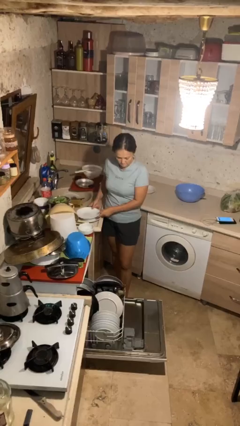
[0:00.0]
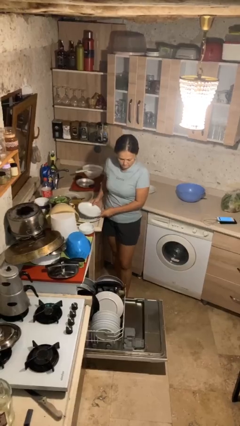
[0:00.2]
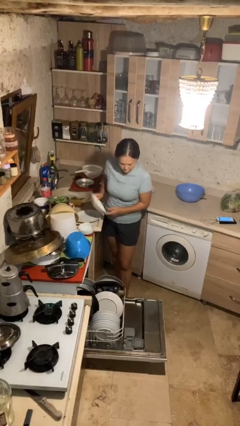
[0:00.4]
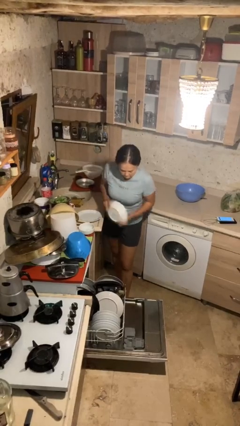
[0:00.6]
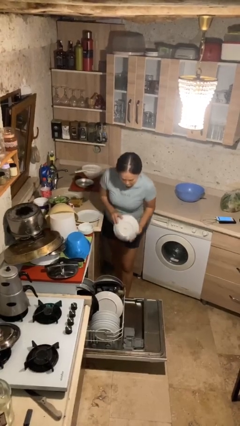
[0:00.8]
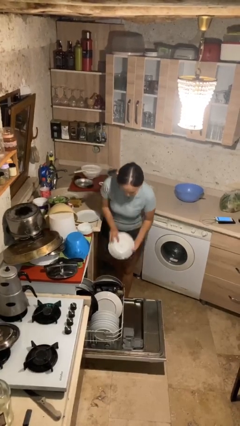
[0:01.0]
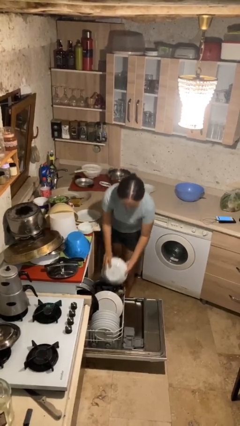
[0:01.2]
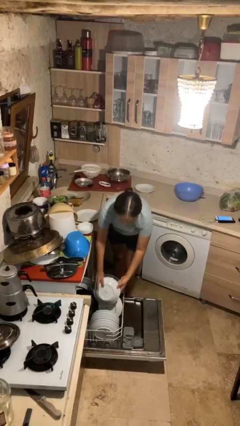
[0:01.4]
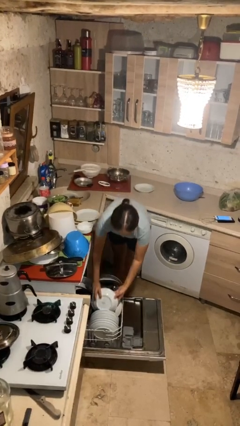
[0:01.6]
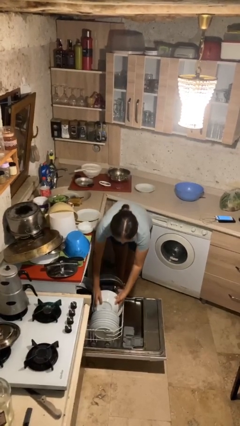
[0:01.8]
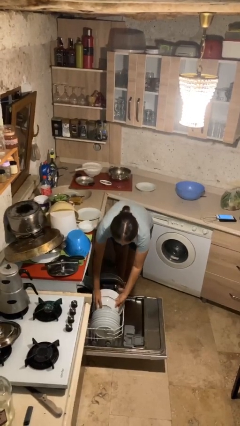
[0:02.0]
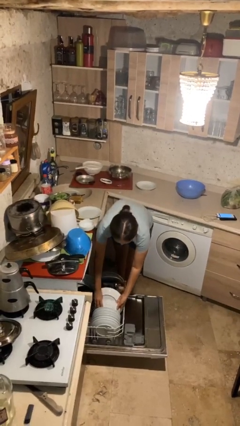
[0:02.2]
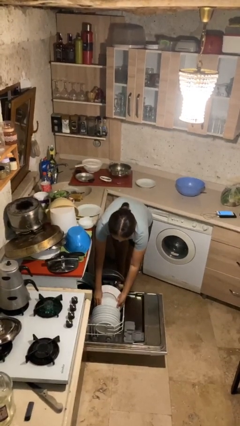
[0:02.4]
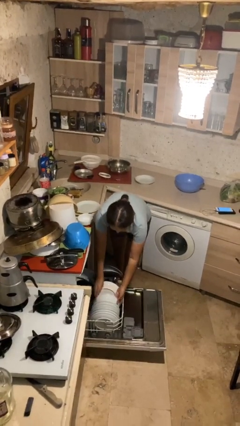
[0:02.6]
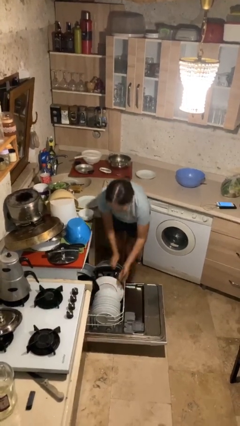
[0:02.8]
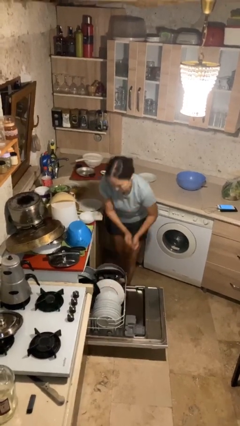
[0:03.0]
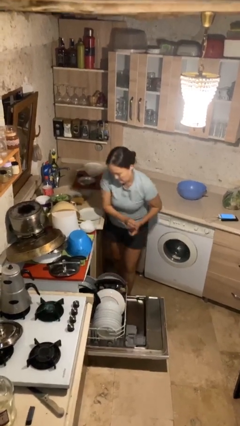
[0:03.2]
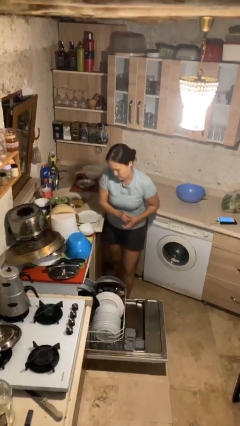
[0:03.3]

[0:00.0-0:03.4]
person loads dishwasher

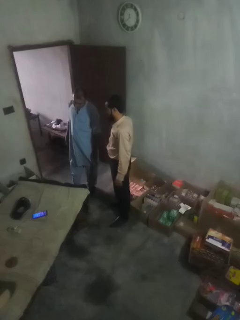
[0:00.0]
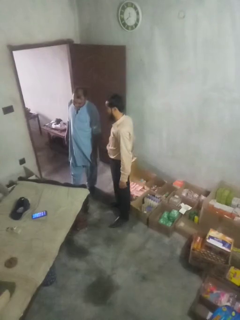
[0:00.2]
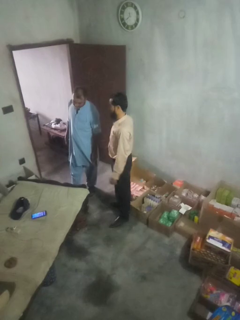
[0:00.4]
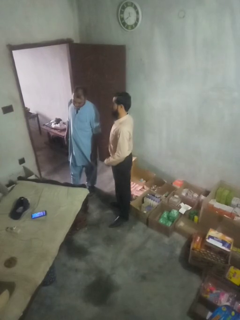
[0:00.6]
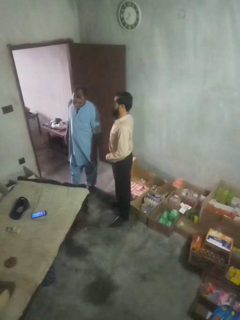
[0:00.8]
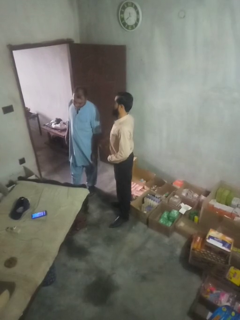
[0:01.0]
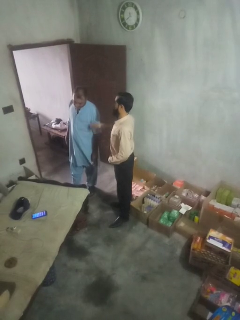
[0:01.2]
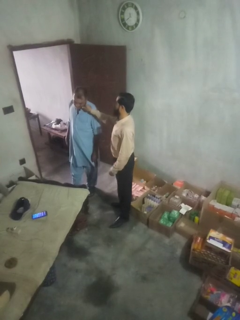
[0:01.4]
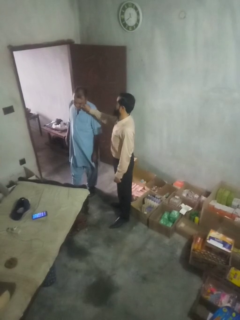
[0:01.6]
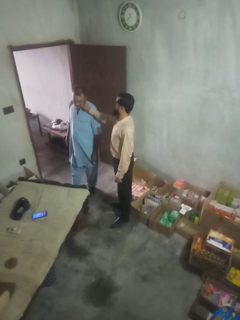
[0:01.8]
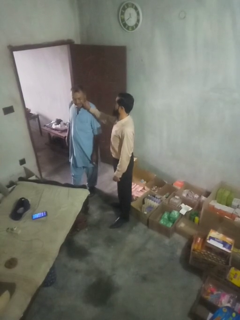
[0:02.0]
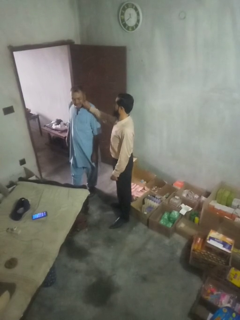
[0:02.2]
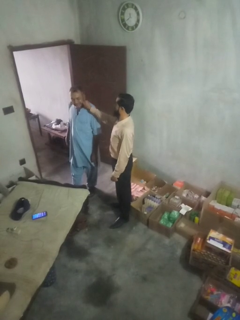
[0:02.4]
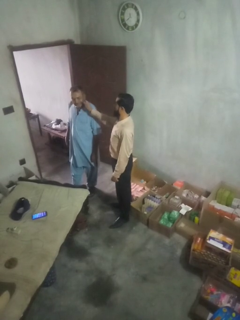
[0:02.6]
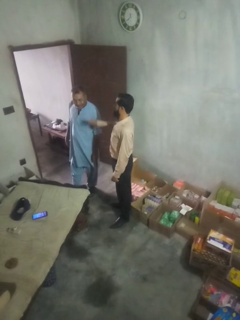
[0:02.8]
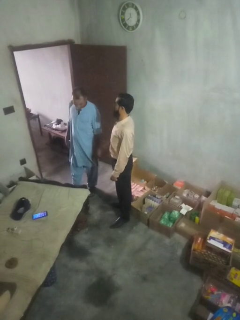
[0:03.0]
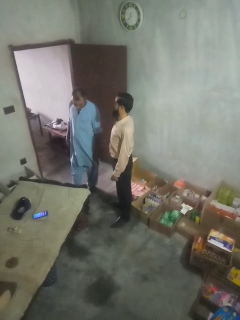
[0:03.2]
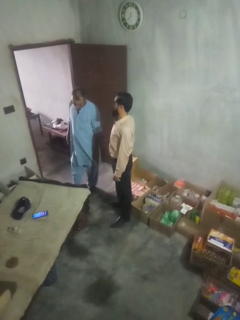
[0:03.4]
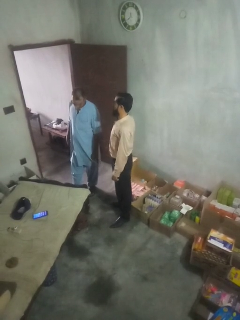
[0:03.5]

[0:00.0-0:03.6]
person touches face of person

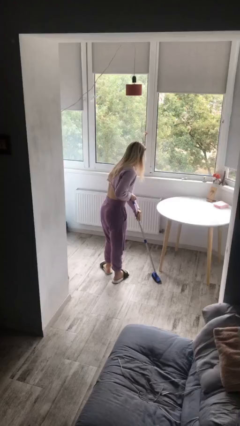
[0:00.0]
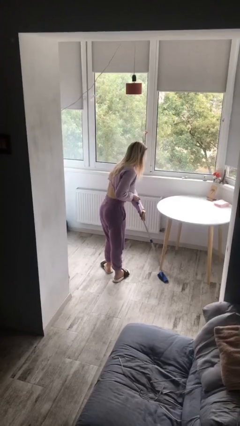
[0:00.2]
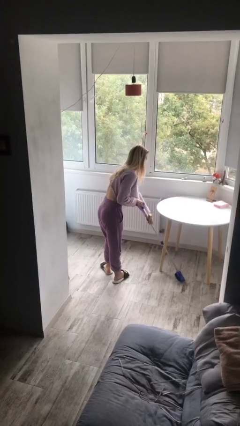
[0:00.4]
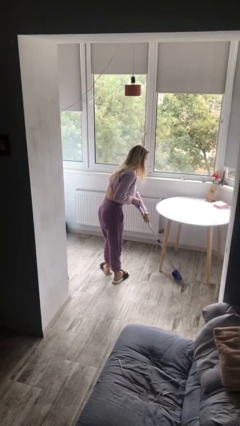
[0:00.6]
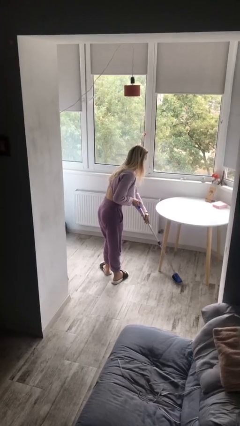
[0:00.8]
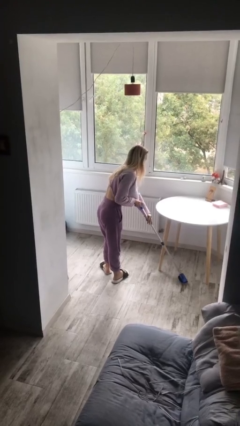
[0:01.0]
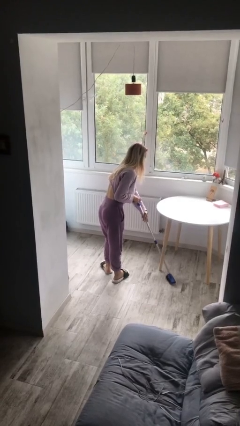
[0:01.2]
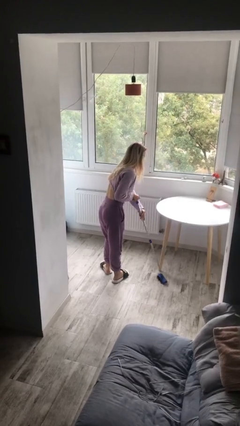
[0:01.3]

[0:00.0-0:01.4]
person mops

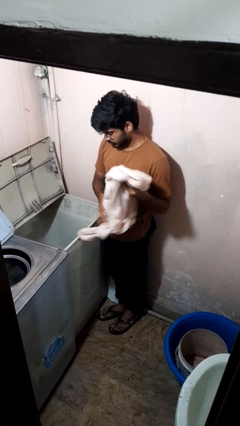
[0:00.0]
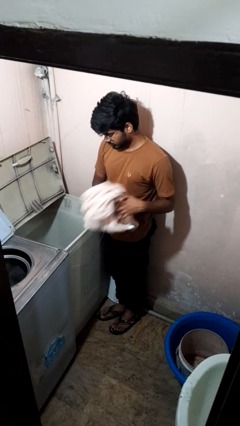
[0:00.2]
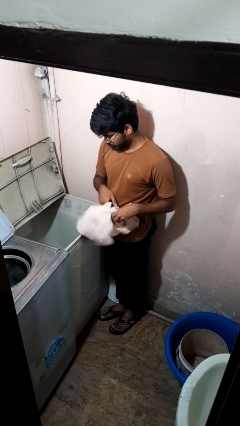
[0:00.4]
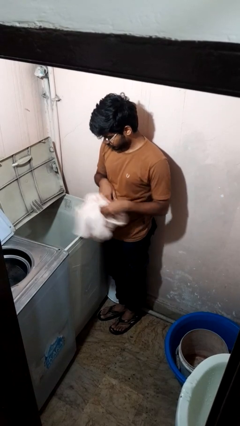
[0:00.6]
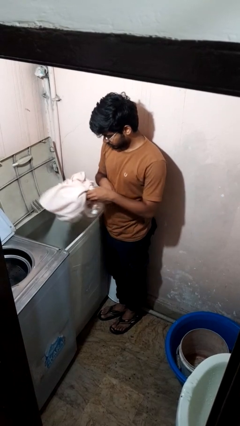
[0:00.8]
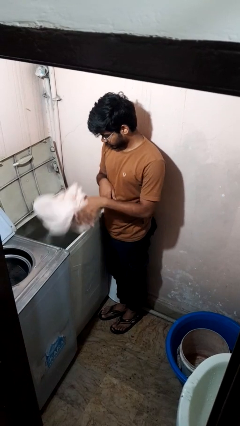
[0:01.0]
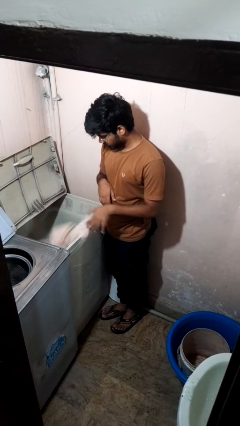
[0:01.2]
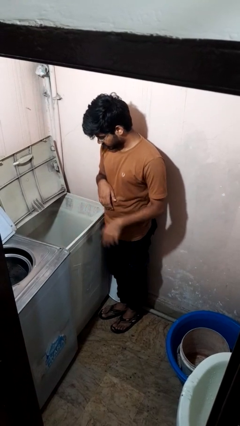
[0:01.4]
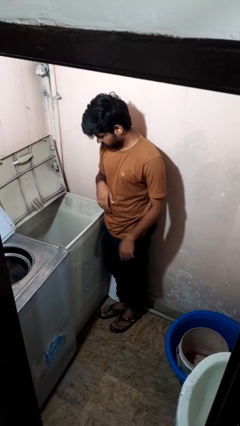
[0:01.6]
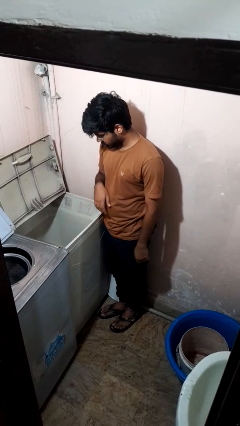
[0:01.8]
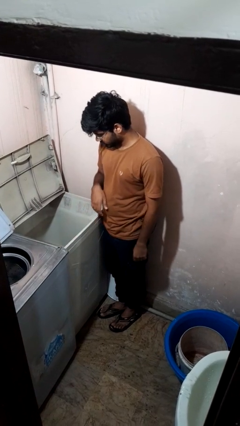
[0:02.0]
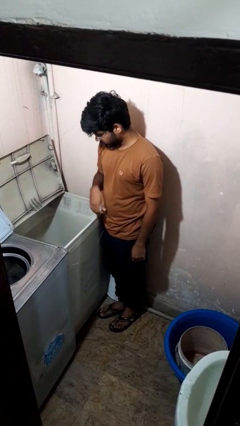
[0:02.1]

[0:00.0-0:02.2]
person loads clotheswasher

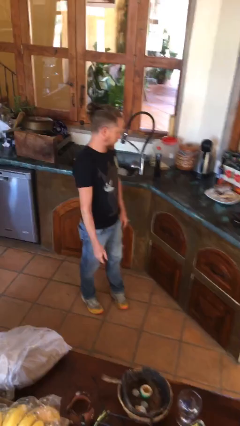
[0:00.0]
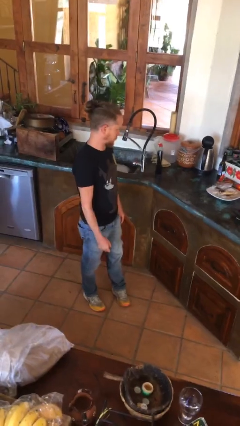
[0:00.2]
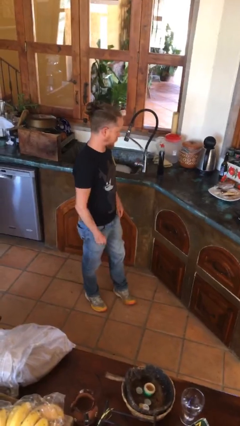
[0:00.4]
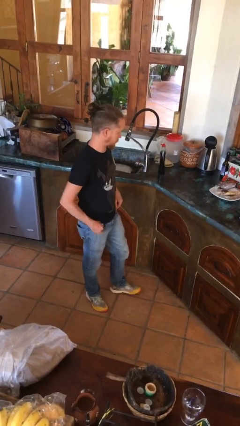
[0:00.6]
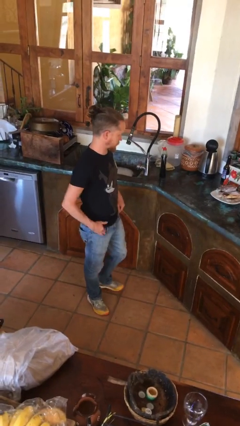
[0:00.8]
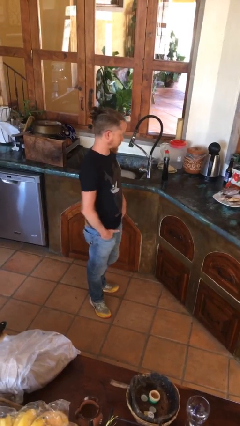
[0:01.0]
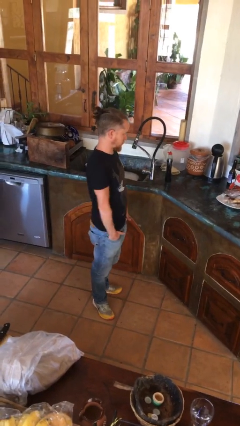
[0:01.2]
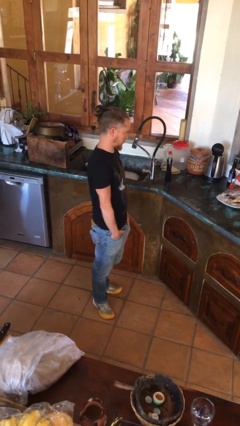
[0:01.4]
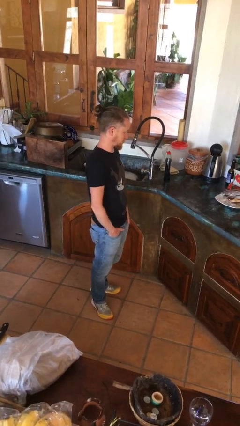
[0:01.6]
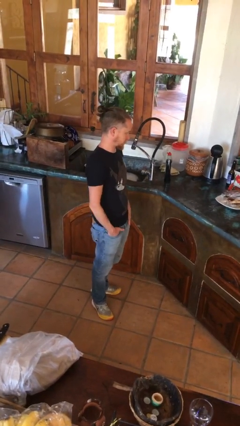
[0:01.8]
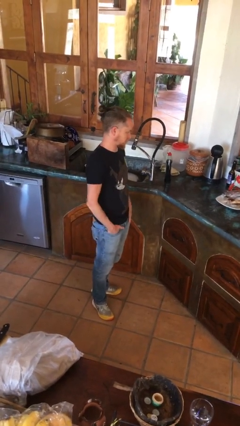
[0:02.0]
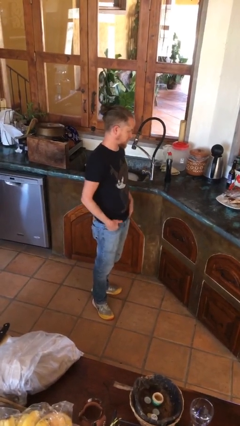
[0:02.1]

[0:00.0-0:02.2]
person puts hands in back pockets

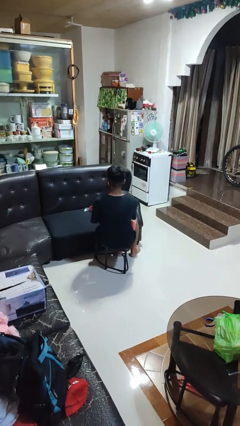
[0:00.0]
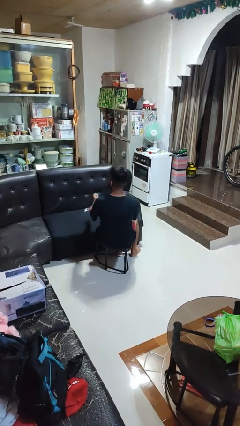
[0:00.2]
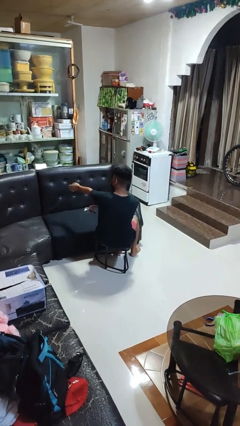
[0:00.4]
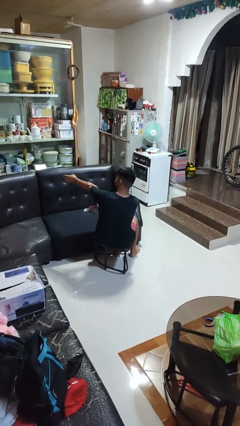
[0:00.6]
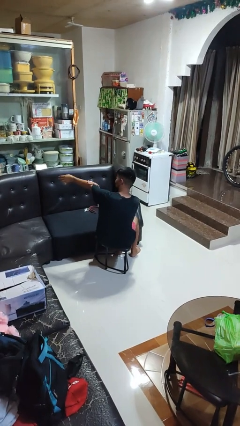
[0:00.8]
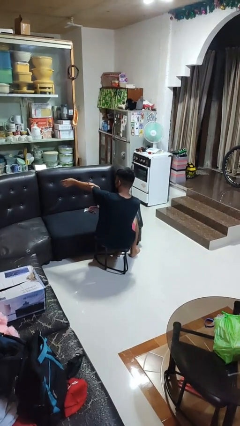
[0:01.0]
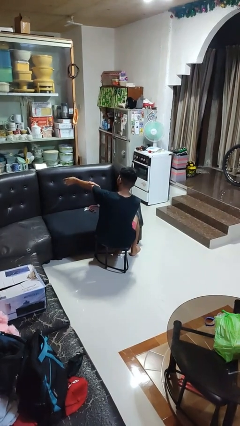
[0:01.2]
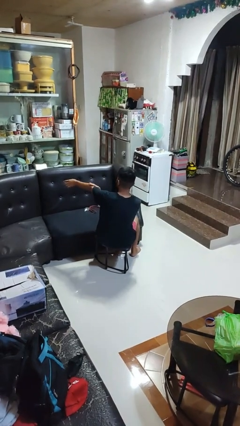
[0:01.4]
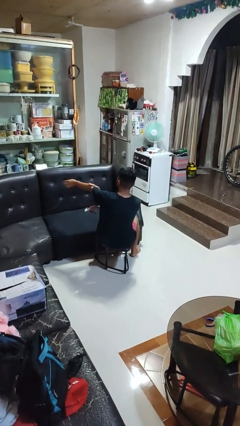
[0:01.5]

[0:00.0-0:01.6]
person swats bug

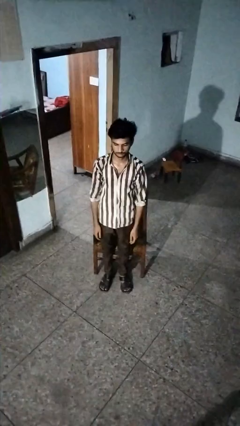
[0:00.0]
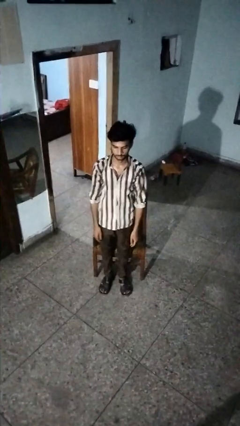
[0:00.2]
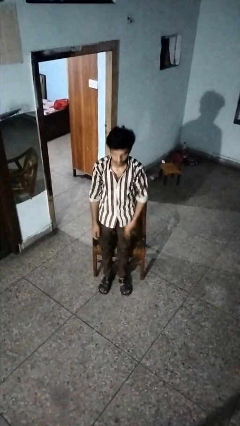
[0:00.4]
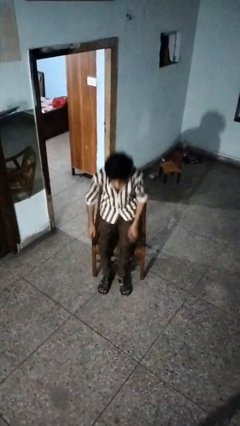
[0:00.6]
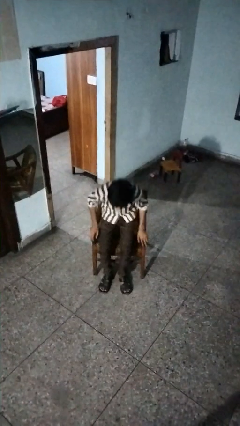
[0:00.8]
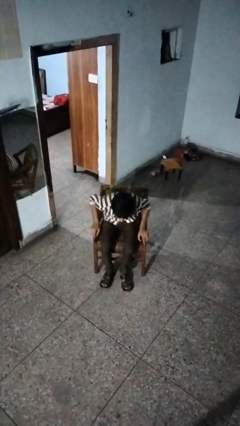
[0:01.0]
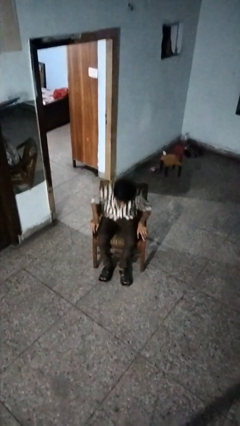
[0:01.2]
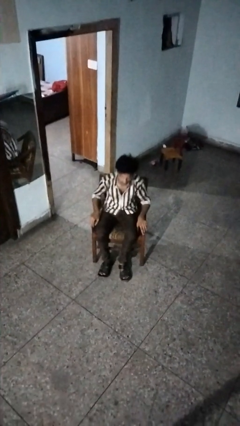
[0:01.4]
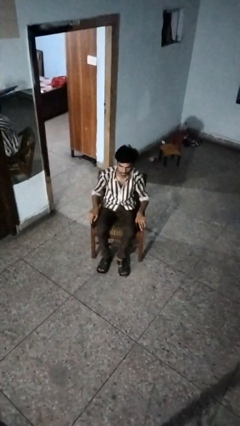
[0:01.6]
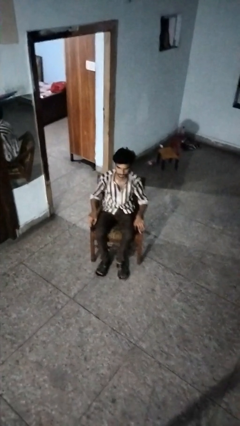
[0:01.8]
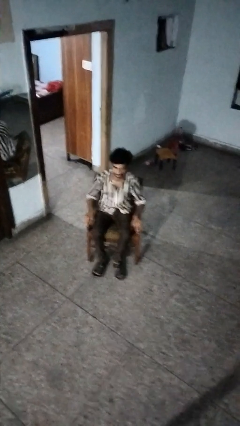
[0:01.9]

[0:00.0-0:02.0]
person sits down

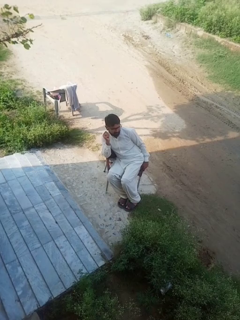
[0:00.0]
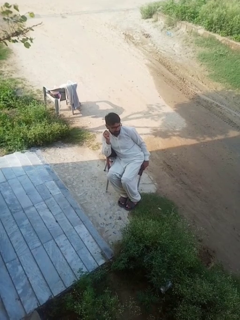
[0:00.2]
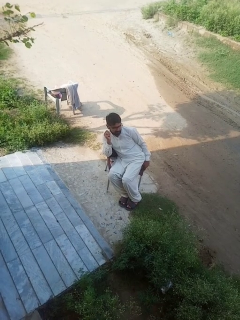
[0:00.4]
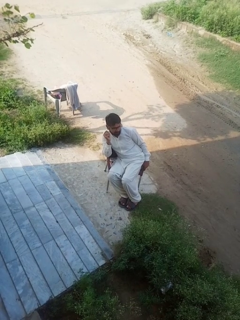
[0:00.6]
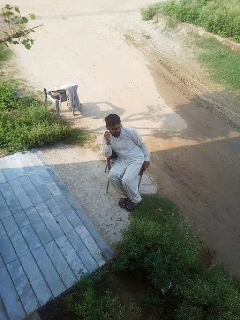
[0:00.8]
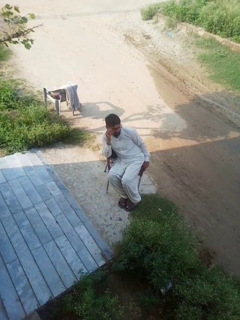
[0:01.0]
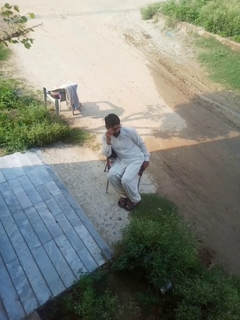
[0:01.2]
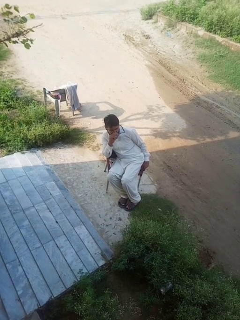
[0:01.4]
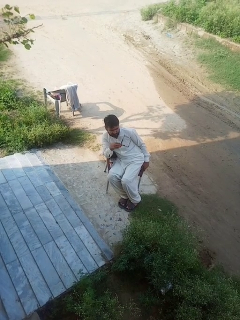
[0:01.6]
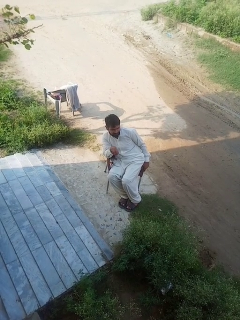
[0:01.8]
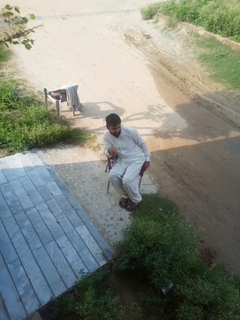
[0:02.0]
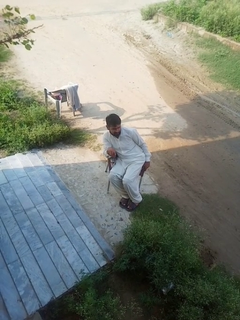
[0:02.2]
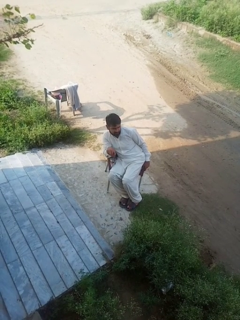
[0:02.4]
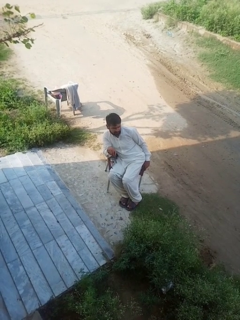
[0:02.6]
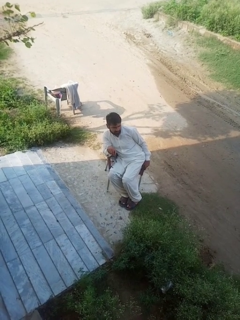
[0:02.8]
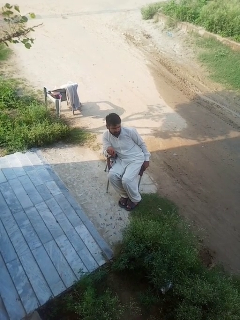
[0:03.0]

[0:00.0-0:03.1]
person takes off glasses
